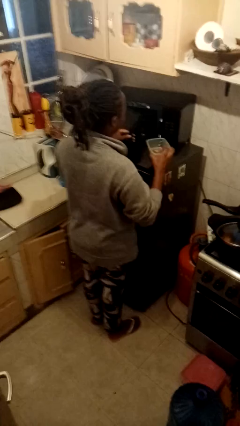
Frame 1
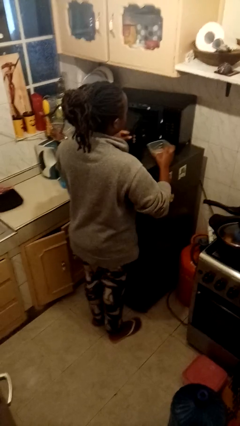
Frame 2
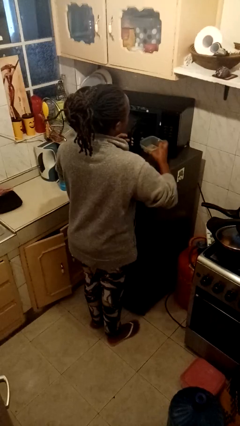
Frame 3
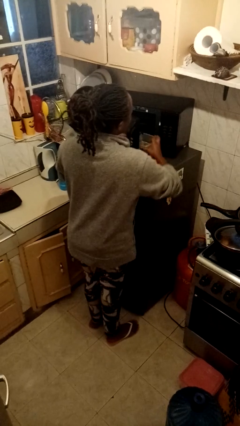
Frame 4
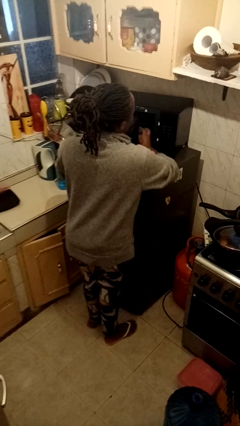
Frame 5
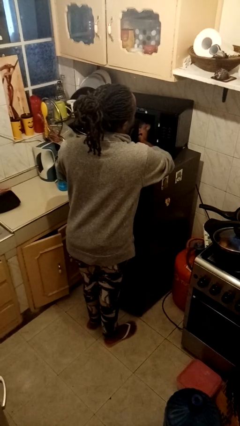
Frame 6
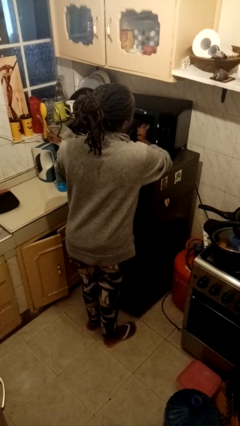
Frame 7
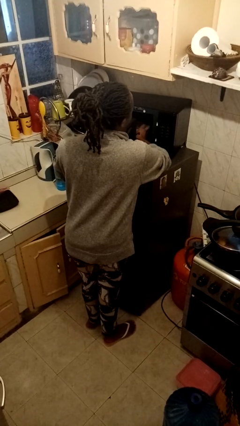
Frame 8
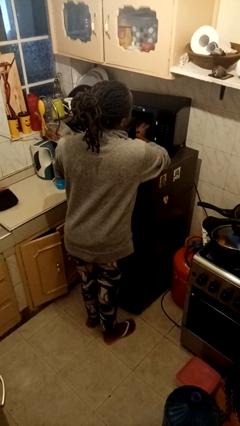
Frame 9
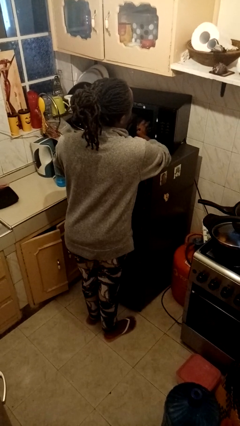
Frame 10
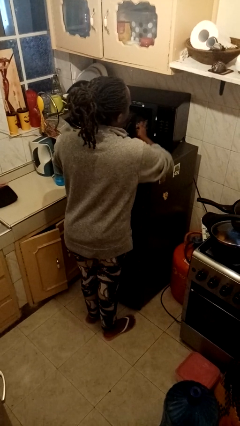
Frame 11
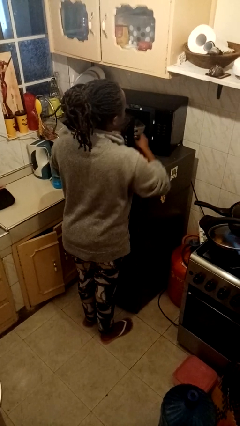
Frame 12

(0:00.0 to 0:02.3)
person puts object into microwave

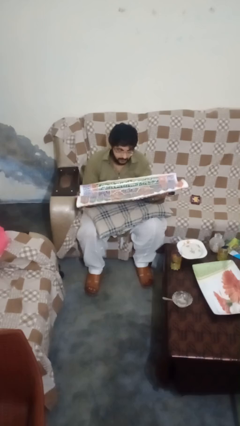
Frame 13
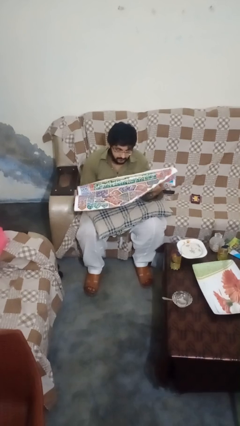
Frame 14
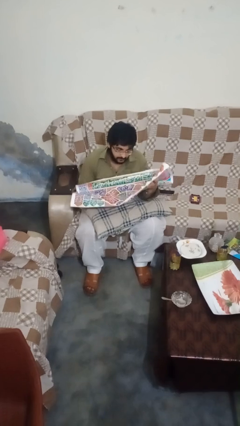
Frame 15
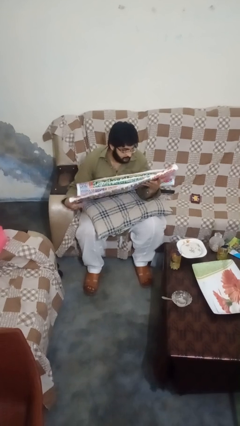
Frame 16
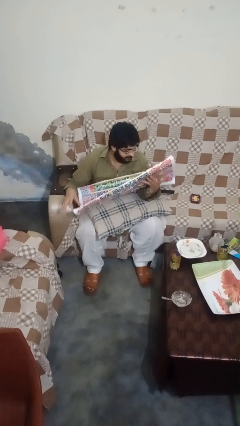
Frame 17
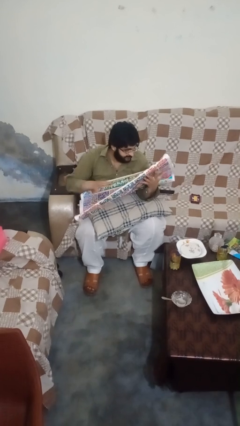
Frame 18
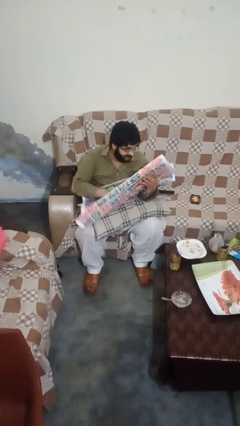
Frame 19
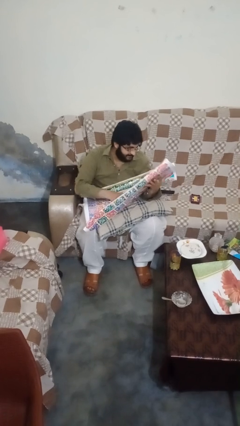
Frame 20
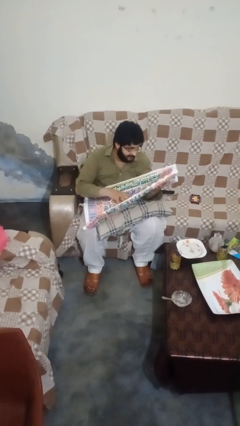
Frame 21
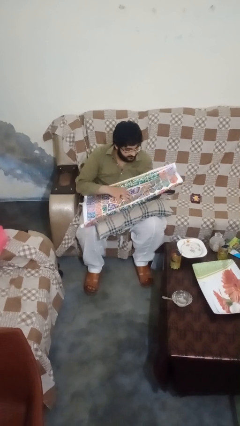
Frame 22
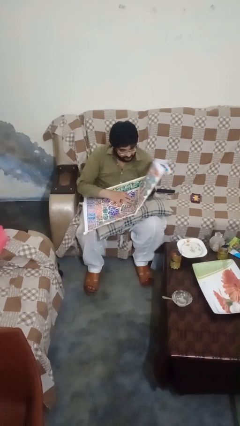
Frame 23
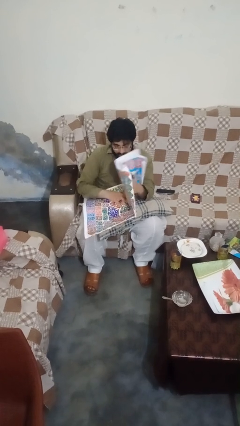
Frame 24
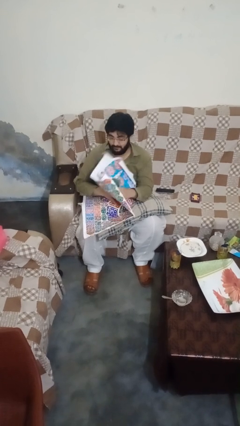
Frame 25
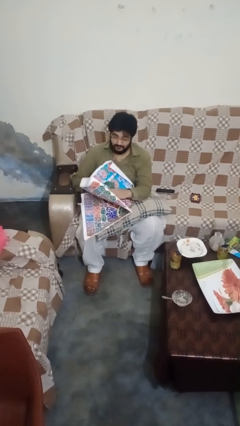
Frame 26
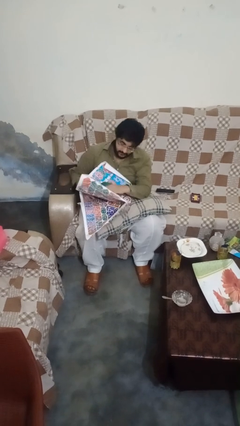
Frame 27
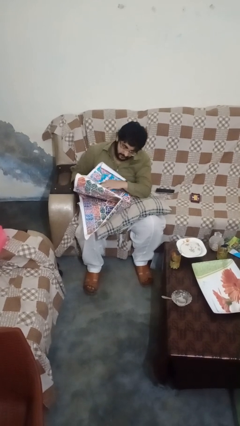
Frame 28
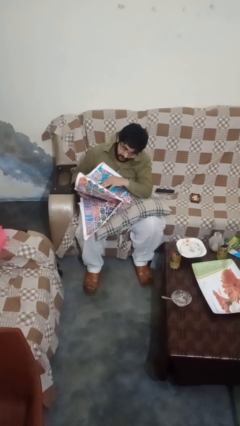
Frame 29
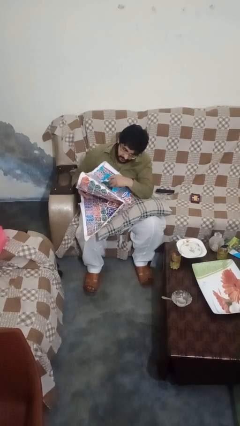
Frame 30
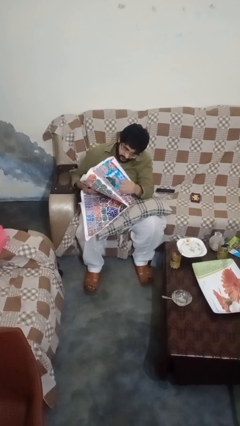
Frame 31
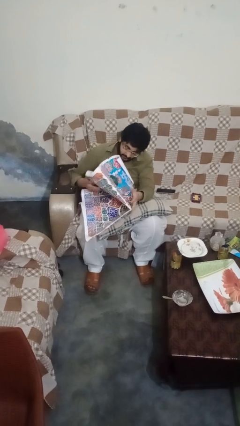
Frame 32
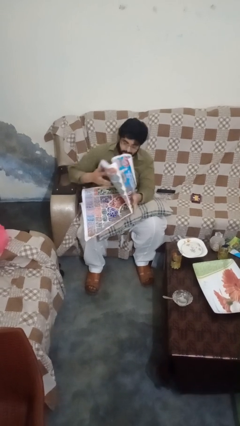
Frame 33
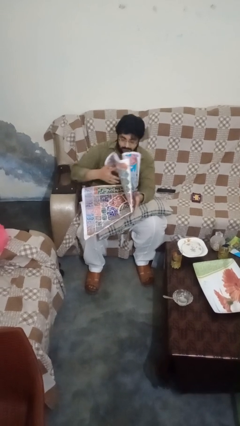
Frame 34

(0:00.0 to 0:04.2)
person reads newspaper

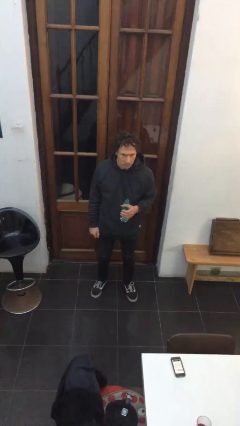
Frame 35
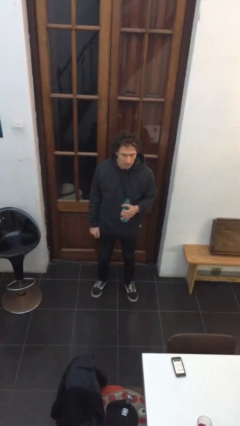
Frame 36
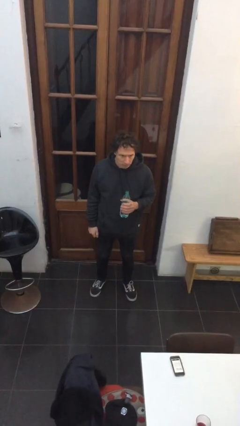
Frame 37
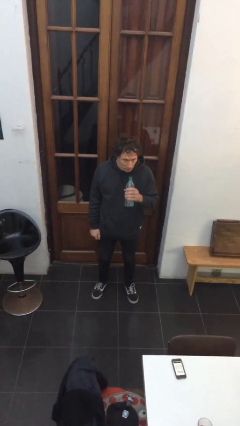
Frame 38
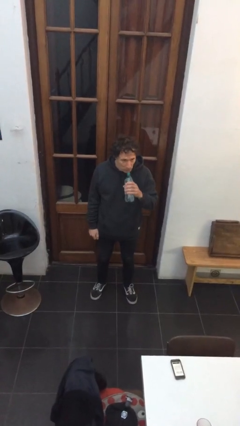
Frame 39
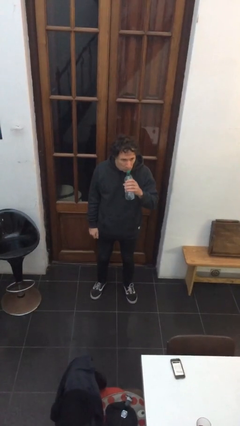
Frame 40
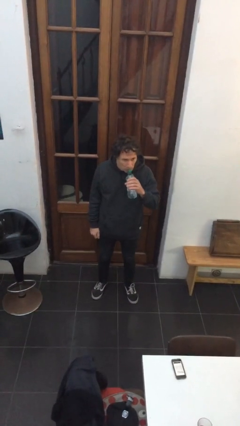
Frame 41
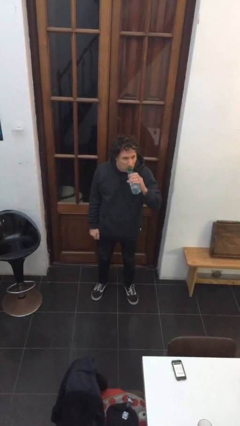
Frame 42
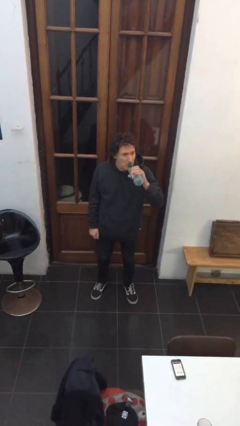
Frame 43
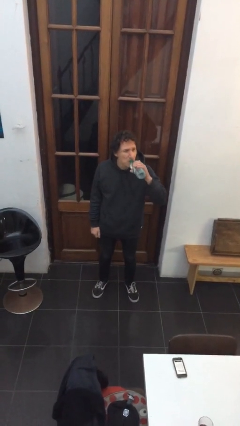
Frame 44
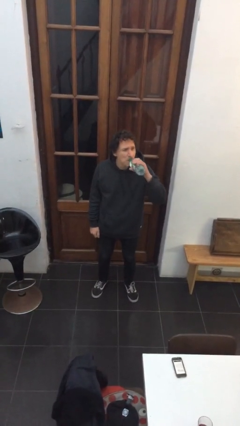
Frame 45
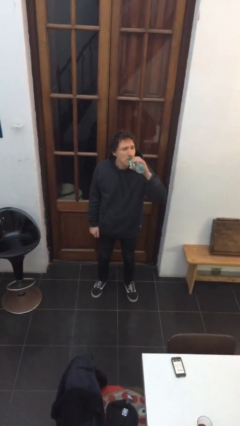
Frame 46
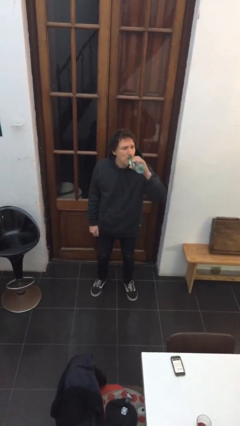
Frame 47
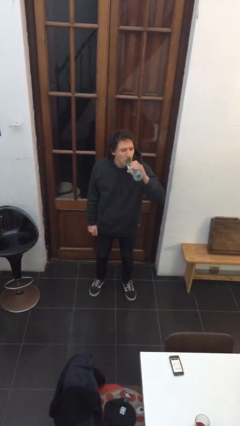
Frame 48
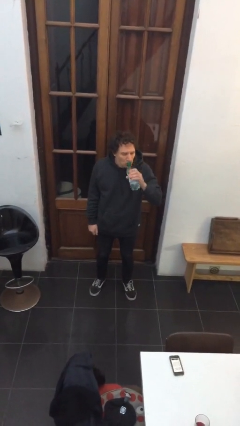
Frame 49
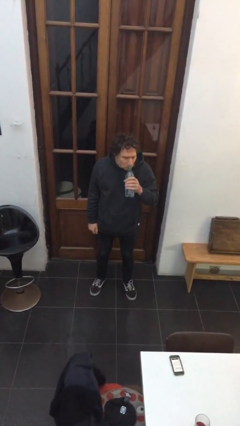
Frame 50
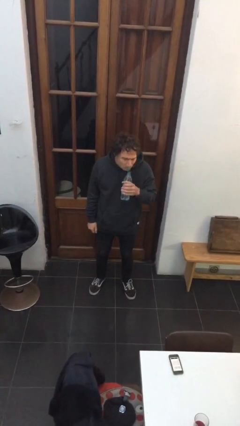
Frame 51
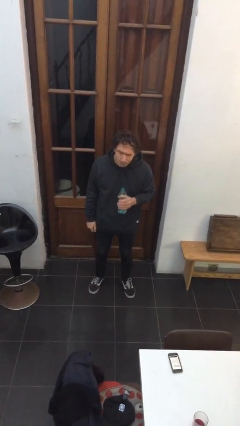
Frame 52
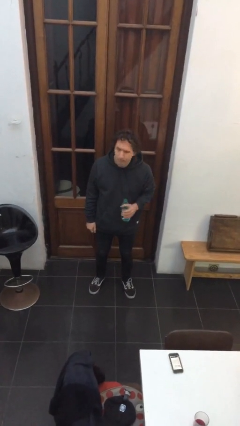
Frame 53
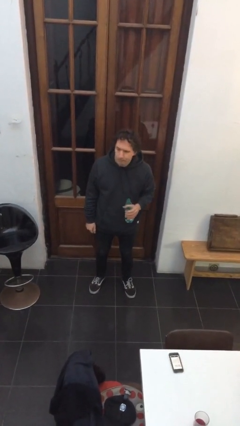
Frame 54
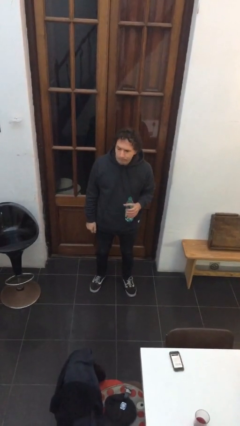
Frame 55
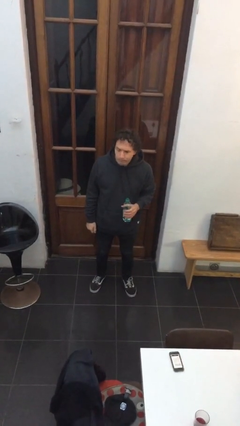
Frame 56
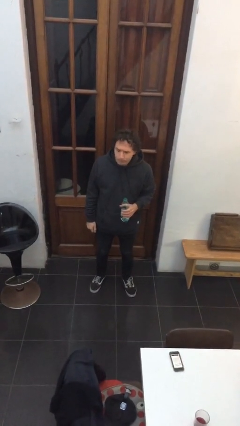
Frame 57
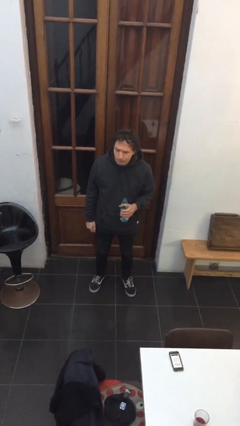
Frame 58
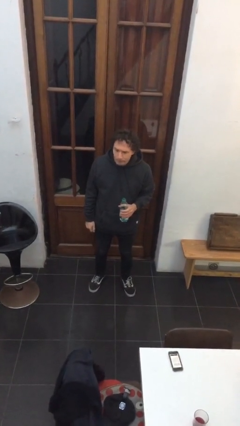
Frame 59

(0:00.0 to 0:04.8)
person drinks from bottle

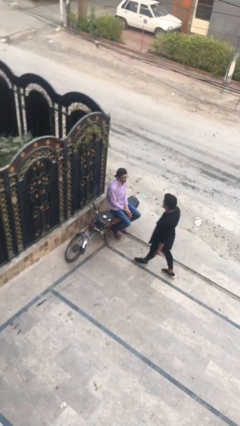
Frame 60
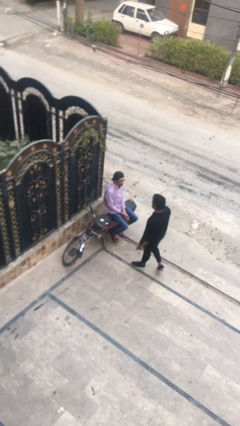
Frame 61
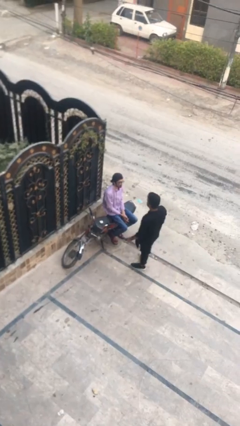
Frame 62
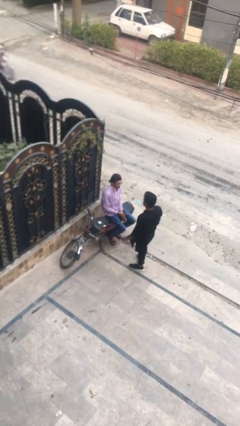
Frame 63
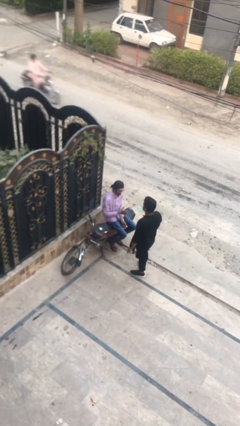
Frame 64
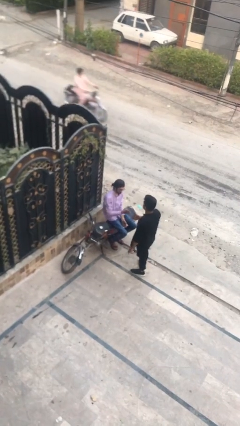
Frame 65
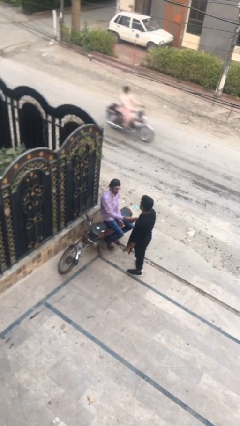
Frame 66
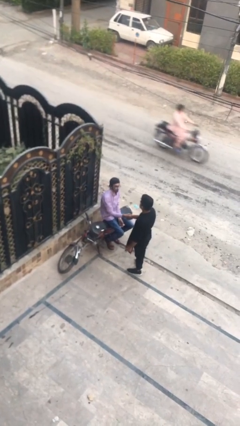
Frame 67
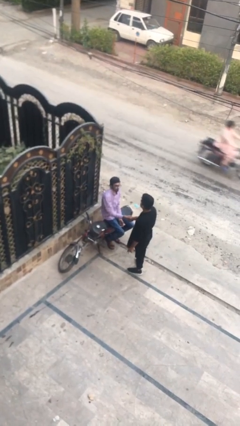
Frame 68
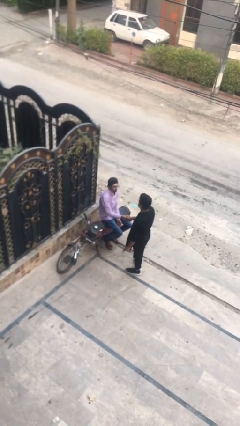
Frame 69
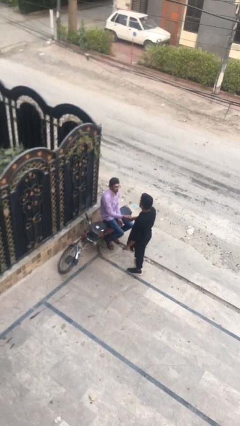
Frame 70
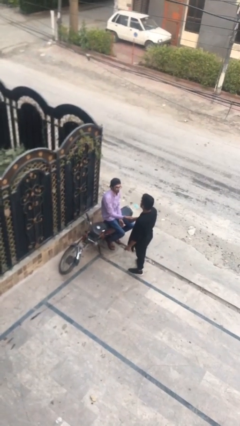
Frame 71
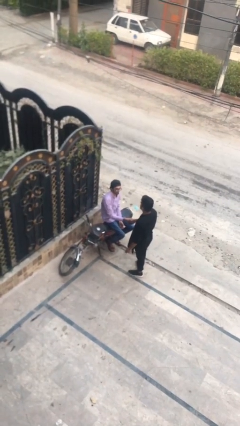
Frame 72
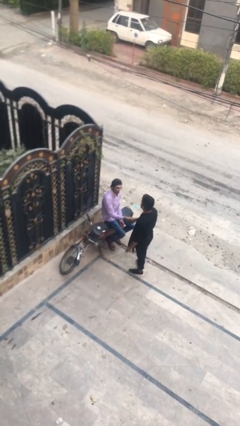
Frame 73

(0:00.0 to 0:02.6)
person shakes hand

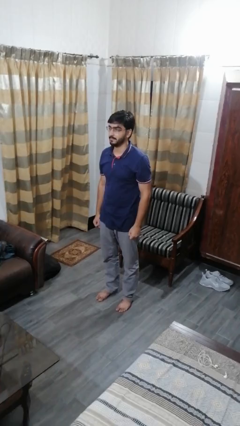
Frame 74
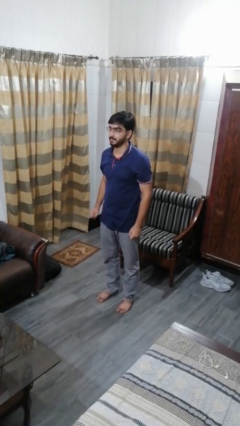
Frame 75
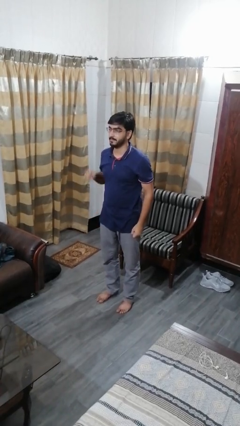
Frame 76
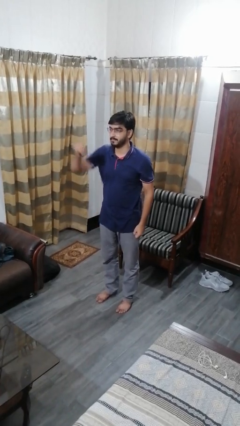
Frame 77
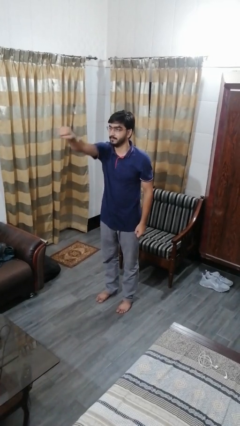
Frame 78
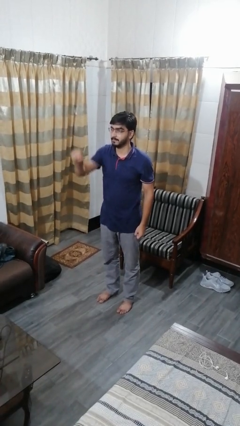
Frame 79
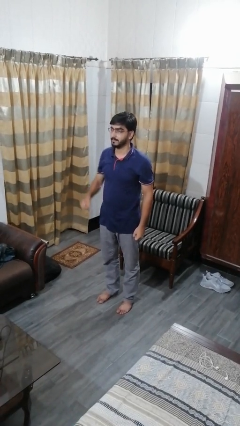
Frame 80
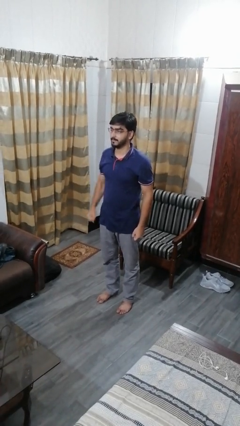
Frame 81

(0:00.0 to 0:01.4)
person punches

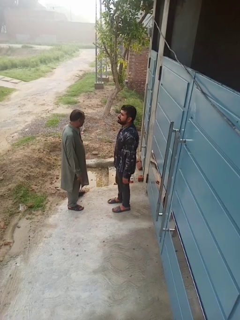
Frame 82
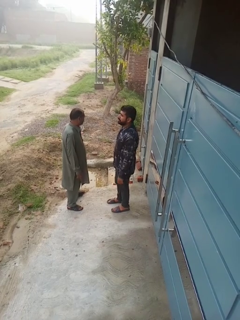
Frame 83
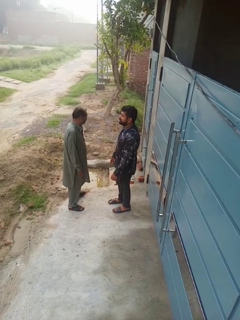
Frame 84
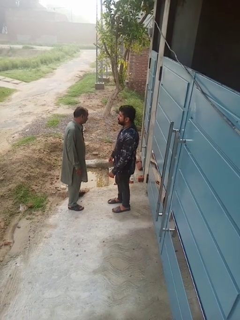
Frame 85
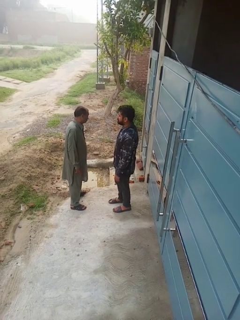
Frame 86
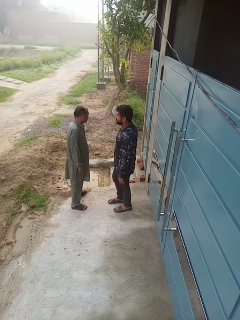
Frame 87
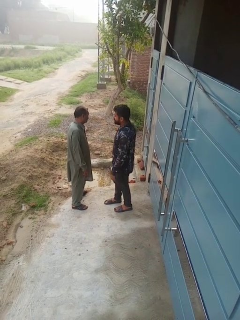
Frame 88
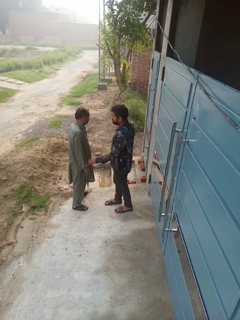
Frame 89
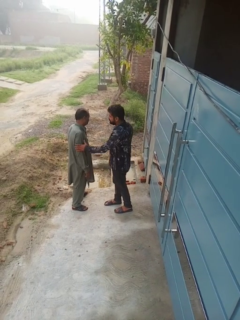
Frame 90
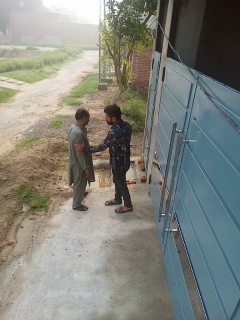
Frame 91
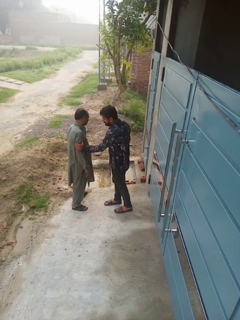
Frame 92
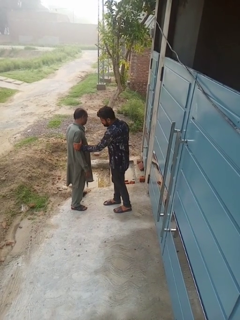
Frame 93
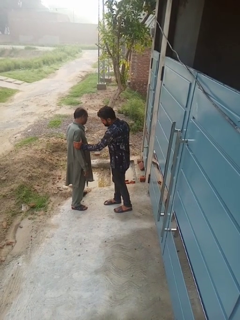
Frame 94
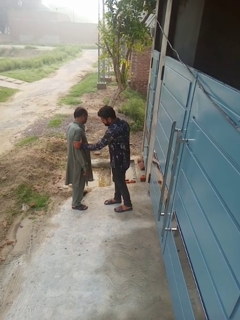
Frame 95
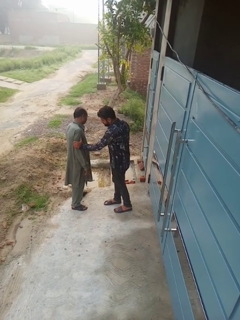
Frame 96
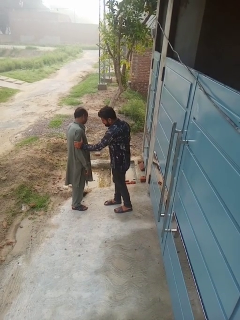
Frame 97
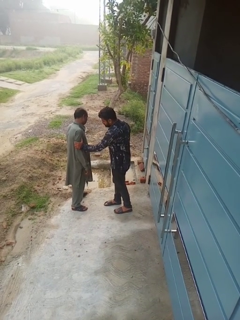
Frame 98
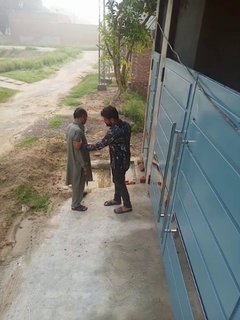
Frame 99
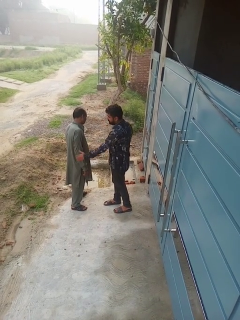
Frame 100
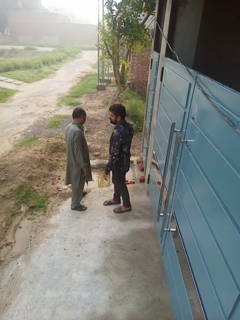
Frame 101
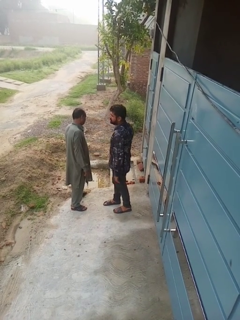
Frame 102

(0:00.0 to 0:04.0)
person grabs person by forearm
